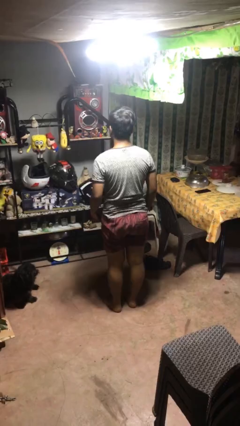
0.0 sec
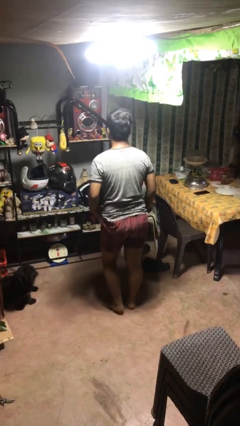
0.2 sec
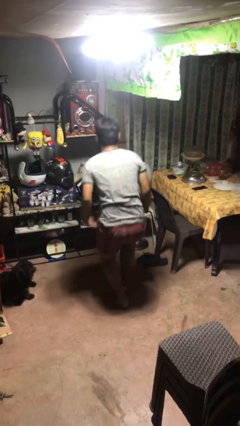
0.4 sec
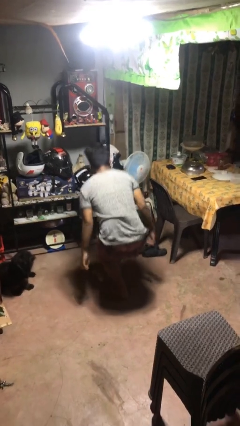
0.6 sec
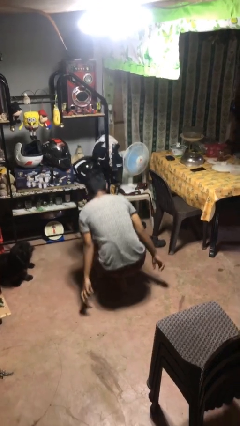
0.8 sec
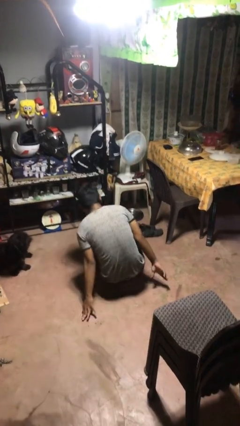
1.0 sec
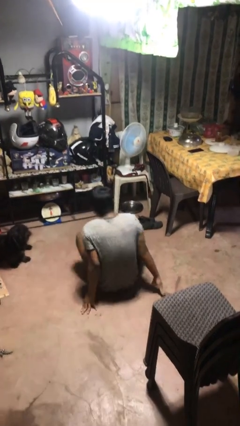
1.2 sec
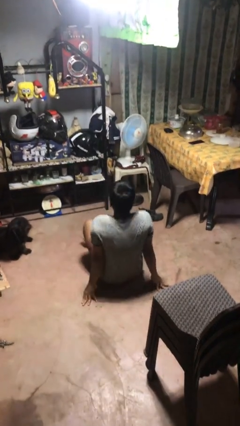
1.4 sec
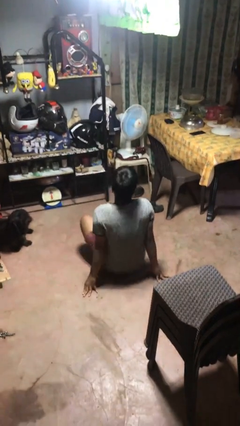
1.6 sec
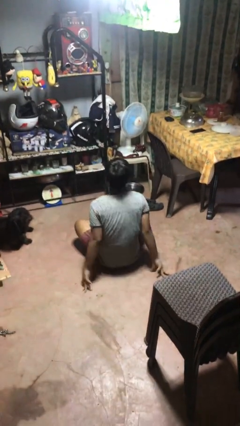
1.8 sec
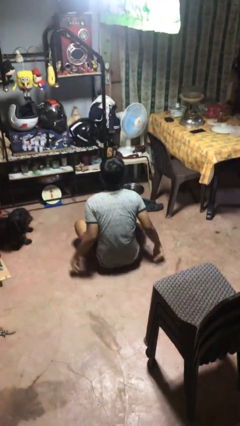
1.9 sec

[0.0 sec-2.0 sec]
person sits crisscross

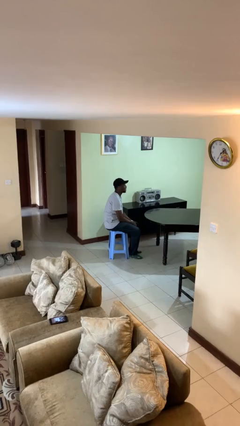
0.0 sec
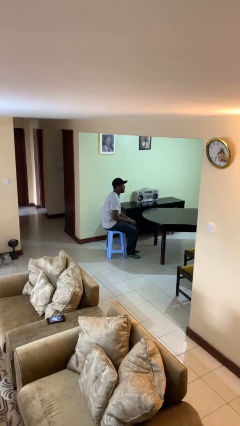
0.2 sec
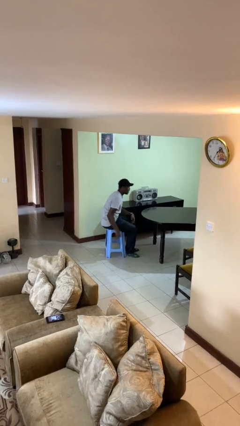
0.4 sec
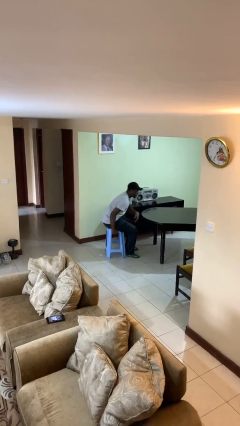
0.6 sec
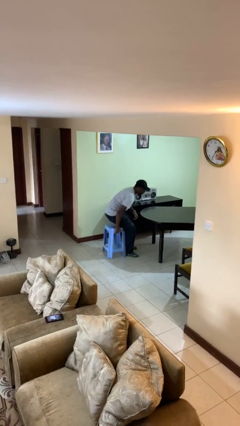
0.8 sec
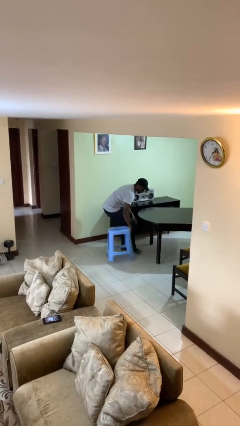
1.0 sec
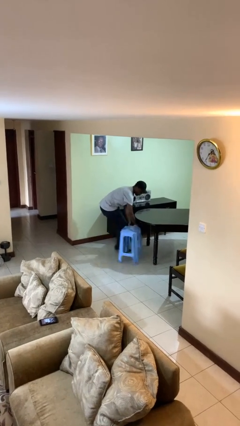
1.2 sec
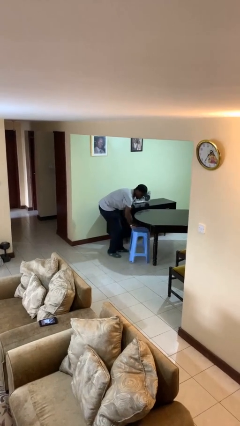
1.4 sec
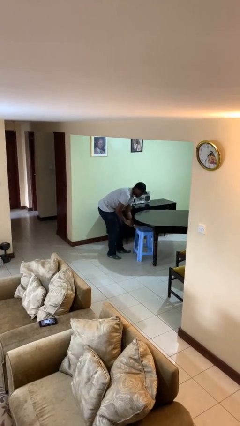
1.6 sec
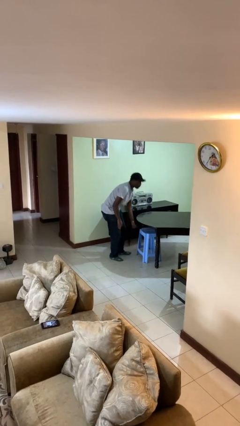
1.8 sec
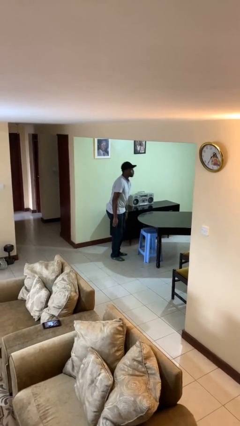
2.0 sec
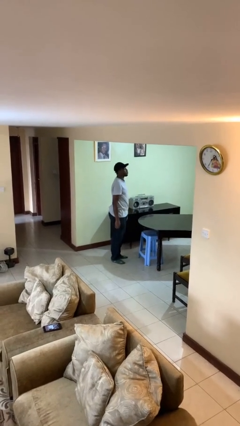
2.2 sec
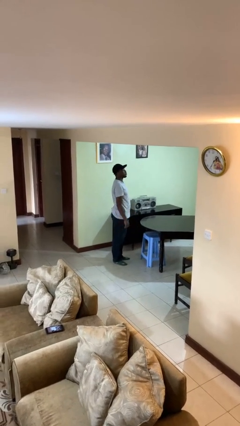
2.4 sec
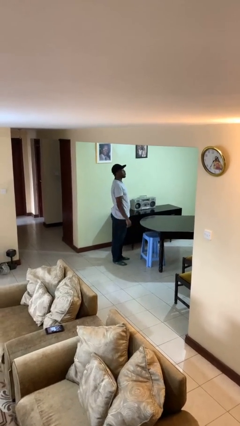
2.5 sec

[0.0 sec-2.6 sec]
person stands up

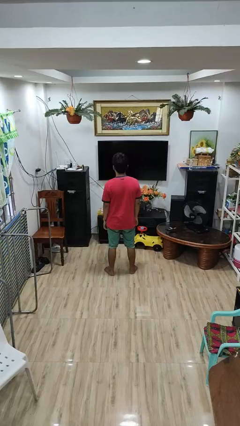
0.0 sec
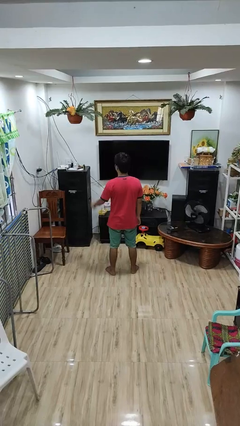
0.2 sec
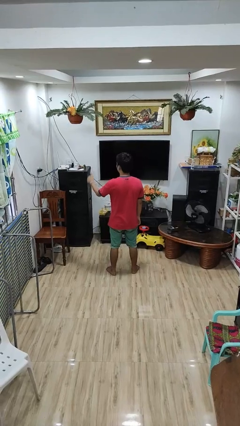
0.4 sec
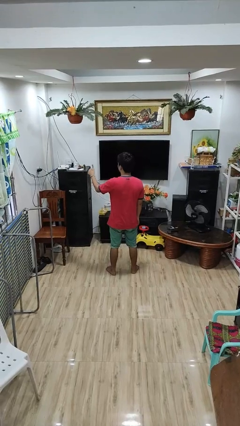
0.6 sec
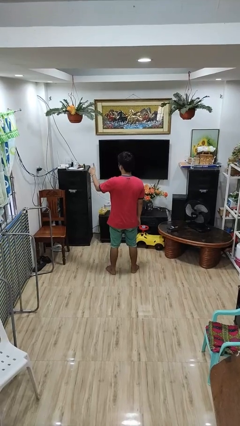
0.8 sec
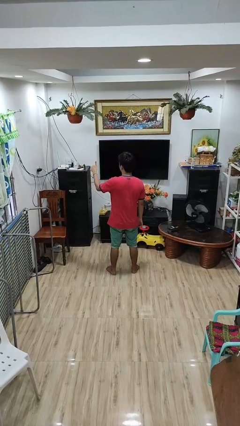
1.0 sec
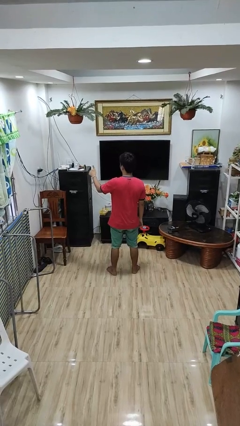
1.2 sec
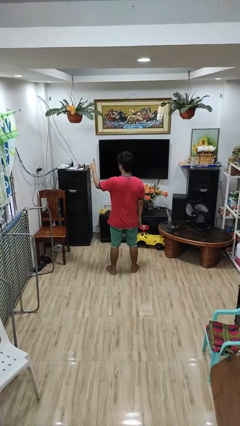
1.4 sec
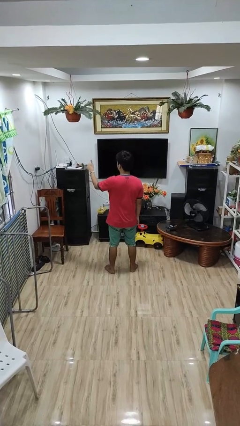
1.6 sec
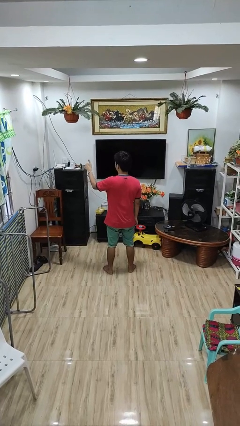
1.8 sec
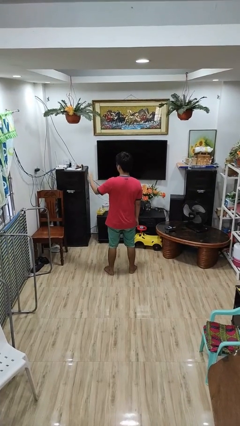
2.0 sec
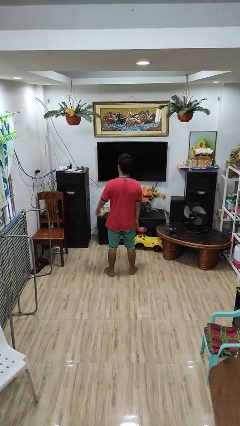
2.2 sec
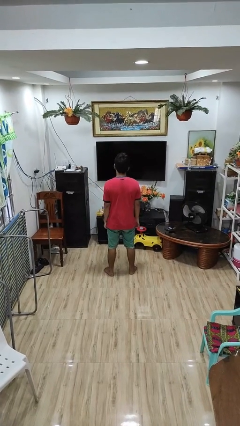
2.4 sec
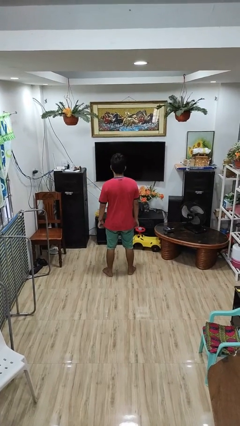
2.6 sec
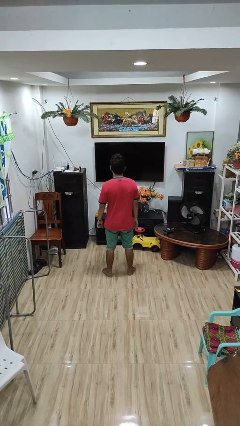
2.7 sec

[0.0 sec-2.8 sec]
person gestures thumbs up

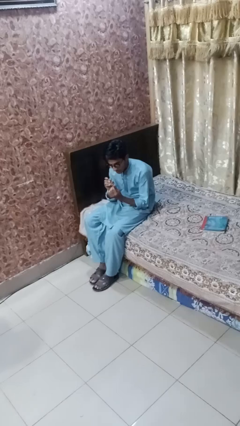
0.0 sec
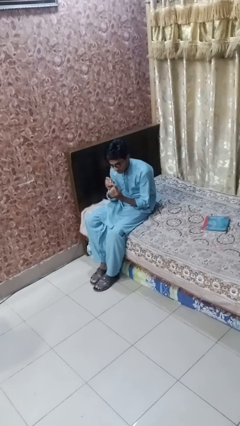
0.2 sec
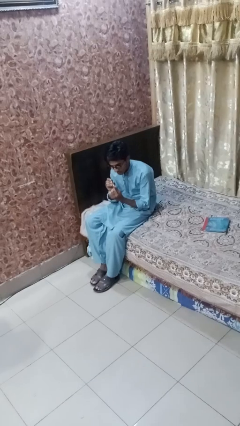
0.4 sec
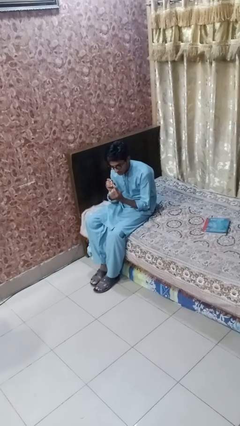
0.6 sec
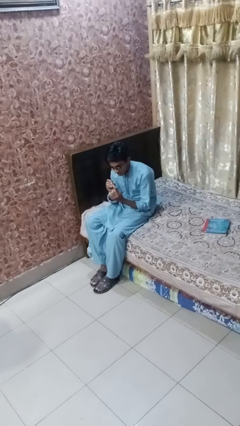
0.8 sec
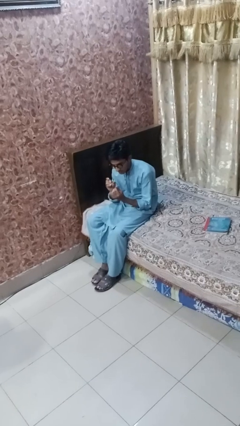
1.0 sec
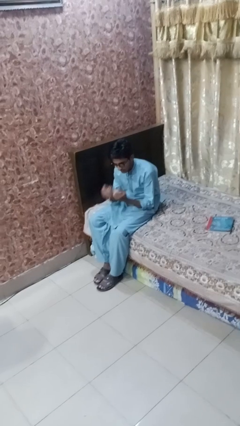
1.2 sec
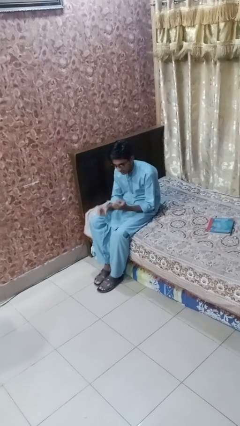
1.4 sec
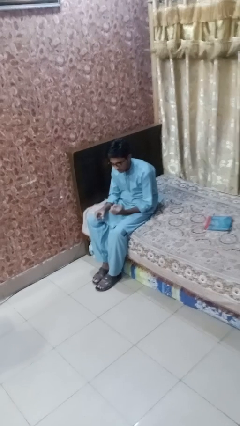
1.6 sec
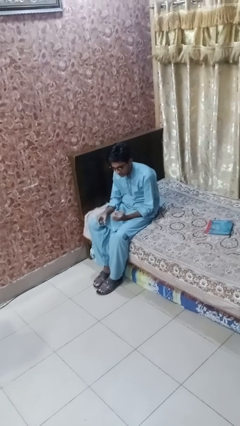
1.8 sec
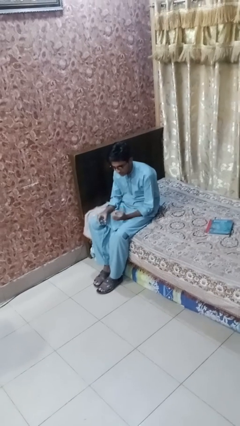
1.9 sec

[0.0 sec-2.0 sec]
person clips fingernails

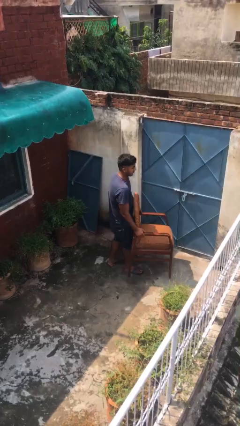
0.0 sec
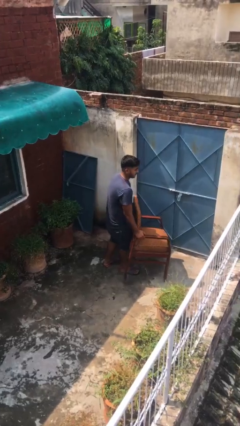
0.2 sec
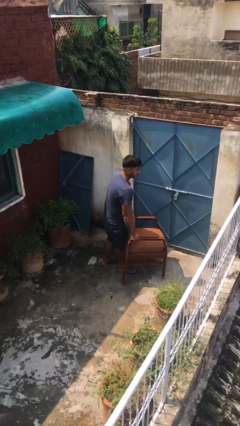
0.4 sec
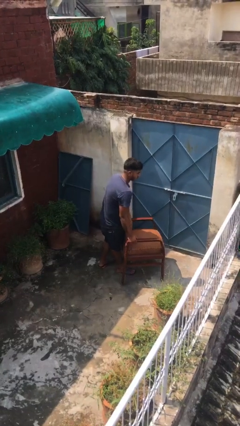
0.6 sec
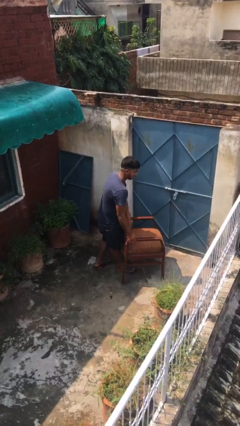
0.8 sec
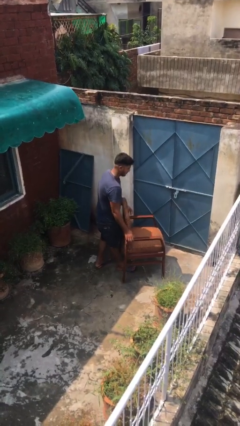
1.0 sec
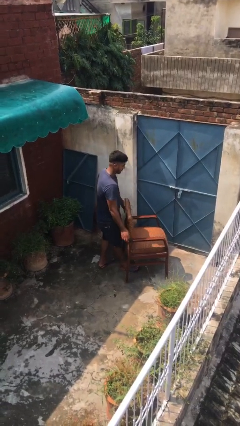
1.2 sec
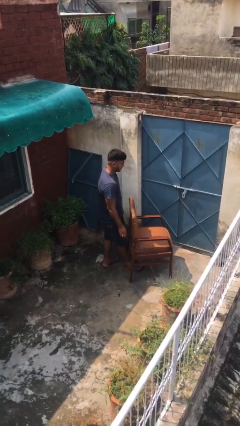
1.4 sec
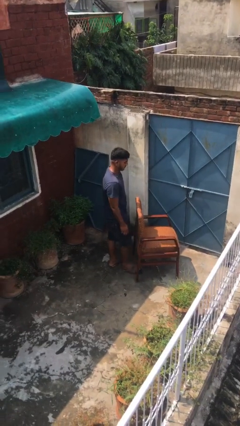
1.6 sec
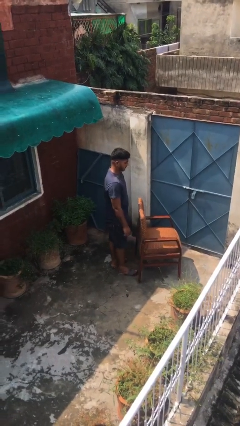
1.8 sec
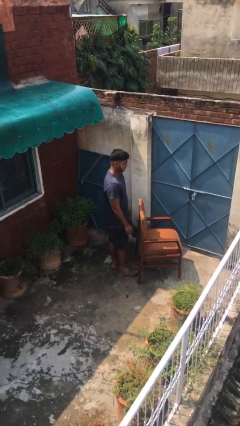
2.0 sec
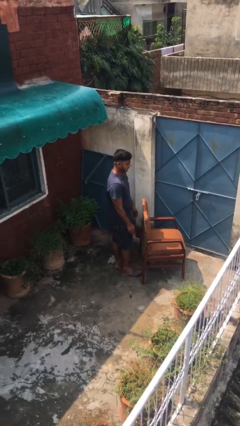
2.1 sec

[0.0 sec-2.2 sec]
person puts down object on floor

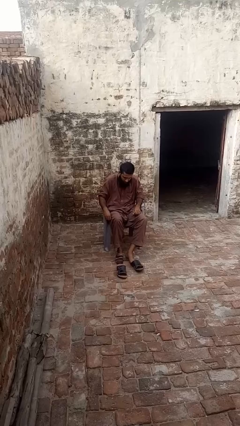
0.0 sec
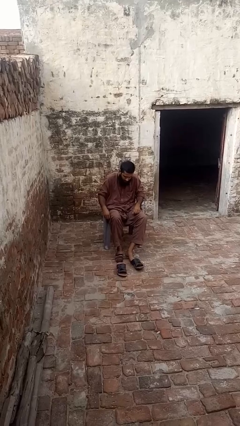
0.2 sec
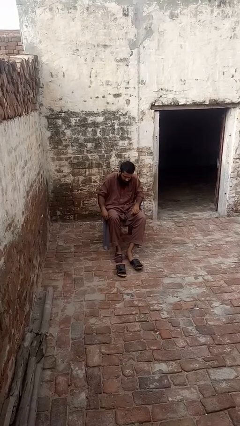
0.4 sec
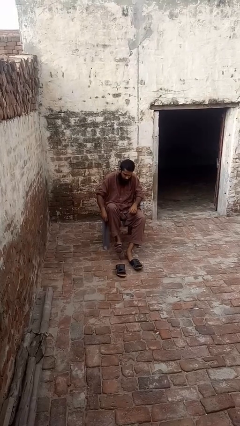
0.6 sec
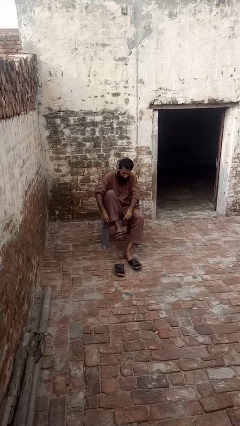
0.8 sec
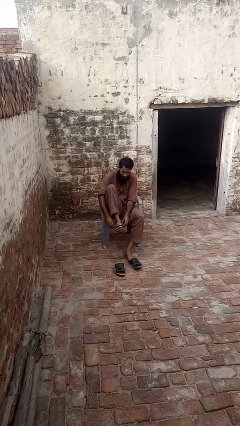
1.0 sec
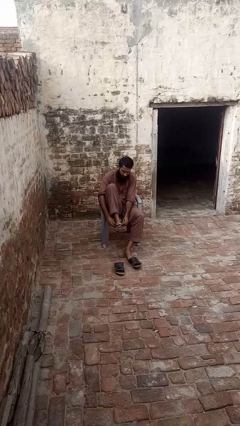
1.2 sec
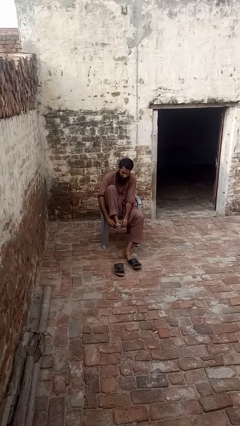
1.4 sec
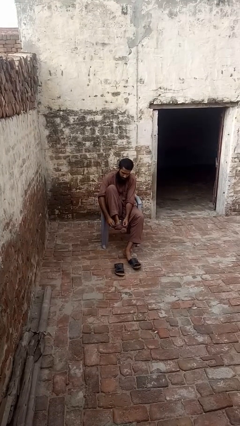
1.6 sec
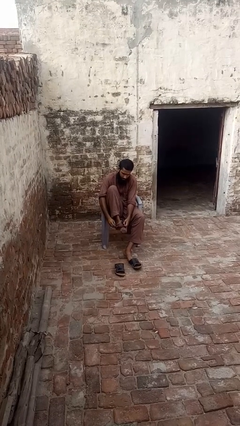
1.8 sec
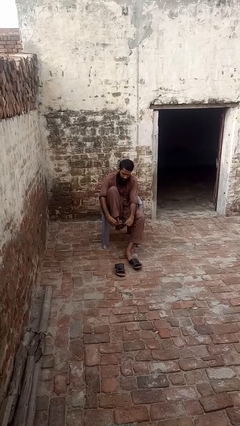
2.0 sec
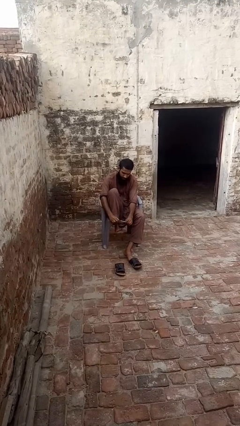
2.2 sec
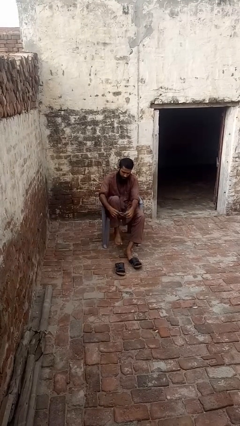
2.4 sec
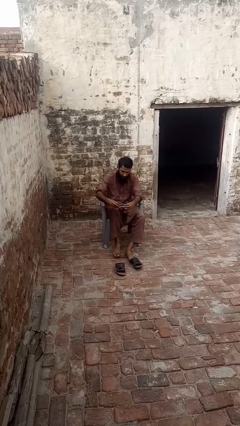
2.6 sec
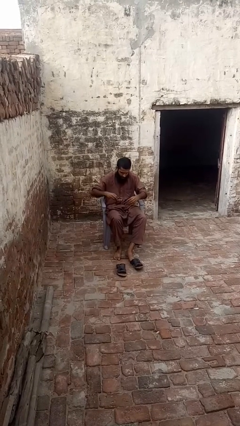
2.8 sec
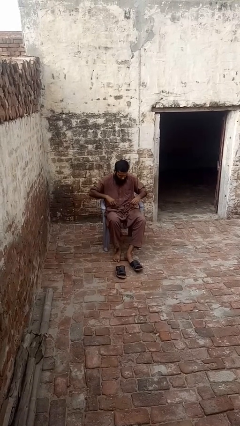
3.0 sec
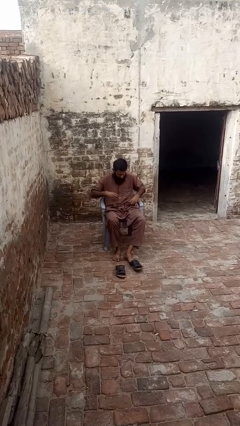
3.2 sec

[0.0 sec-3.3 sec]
person takes off socks

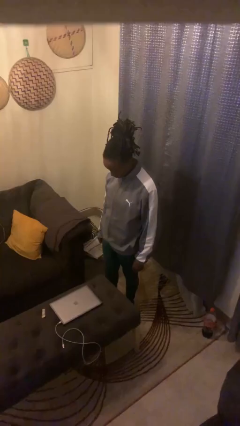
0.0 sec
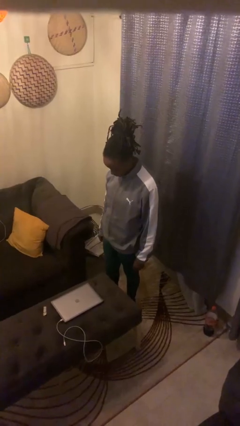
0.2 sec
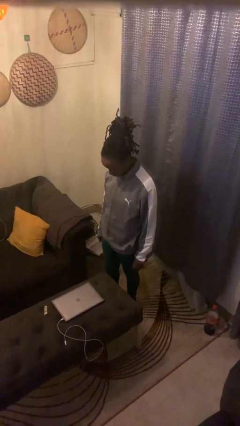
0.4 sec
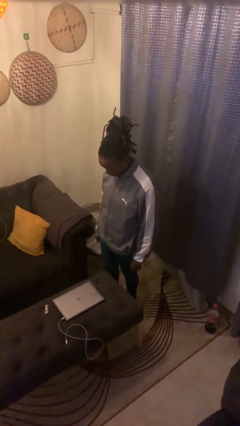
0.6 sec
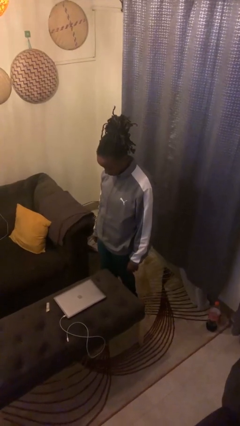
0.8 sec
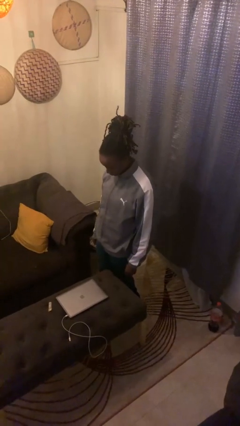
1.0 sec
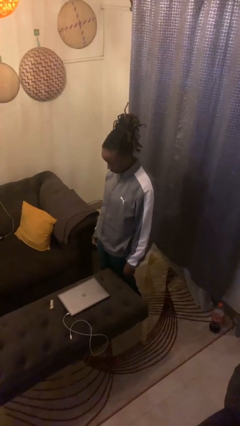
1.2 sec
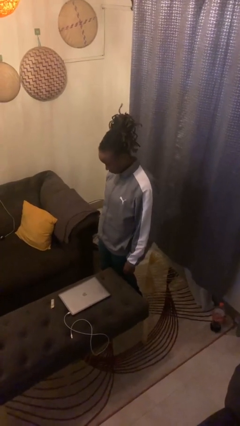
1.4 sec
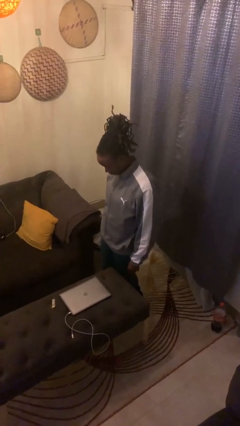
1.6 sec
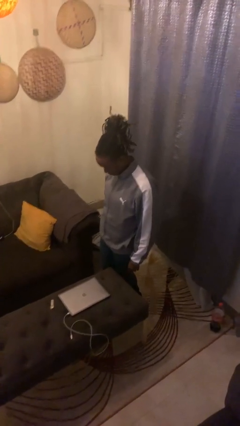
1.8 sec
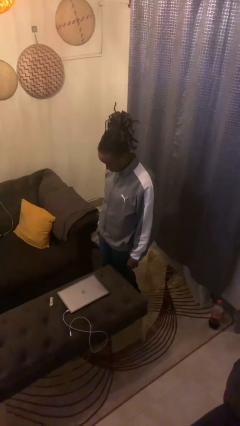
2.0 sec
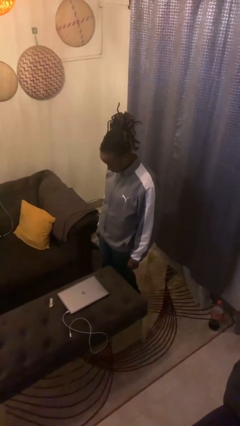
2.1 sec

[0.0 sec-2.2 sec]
person bumps into table
